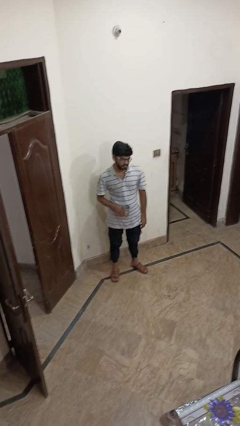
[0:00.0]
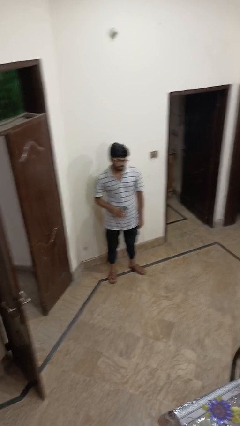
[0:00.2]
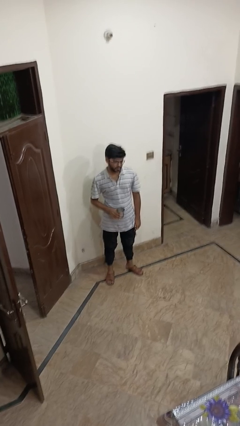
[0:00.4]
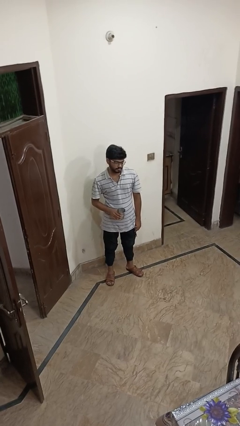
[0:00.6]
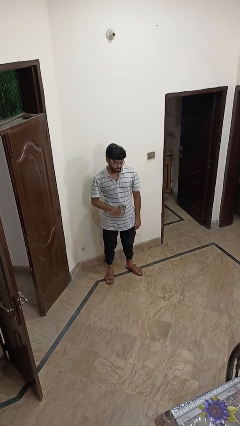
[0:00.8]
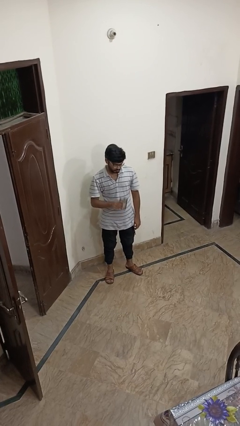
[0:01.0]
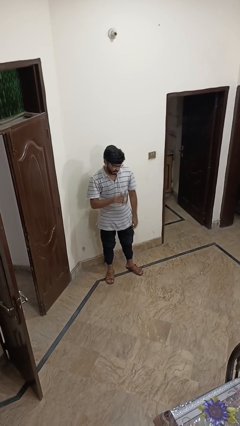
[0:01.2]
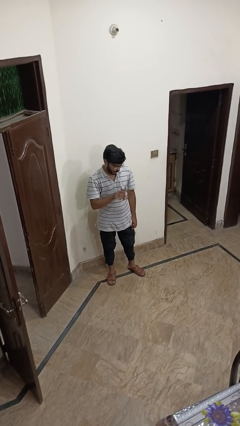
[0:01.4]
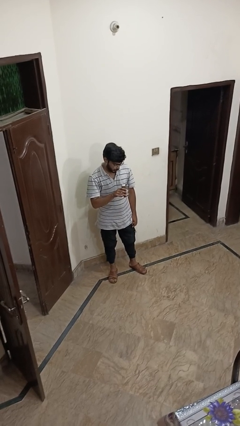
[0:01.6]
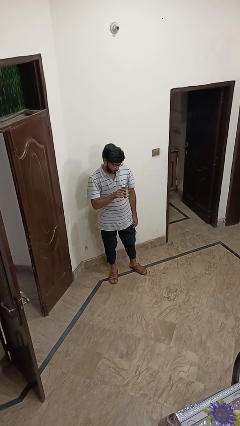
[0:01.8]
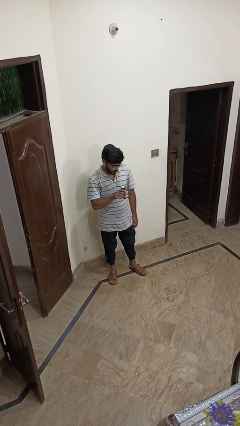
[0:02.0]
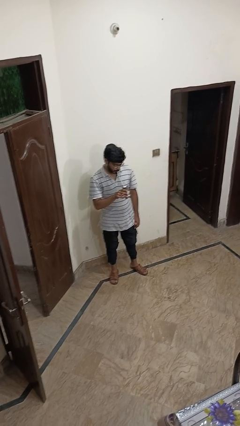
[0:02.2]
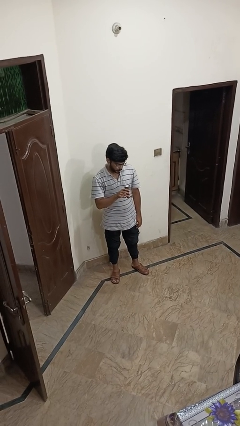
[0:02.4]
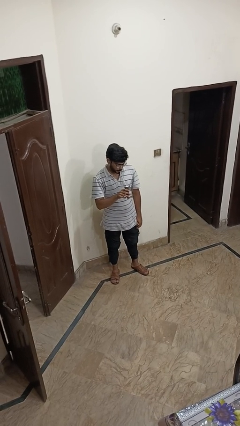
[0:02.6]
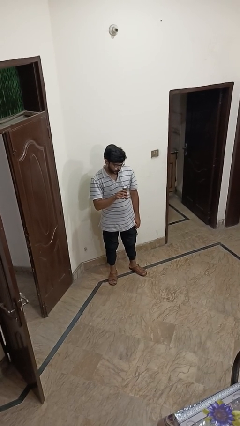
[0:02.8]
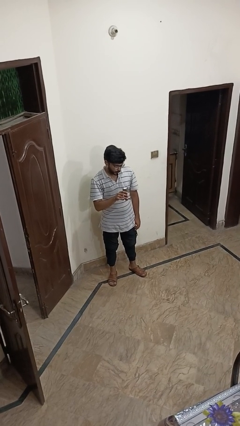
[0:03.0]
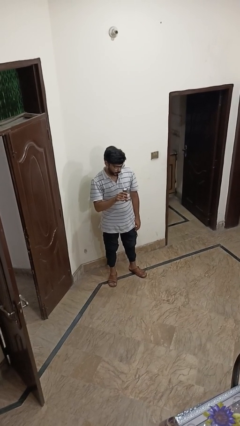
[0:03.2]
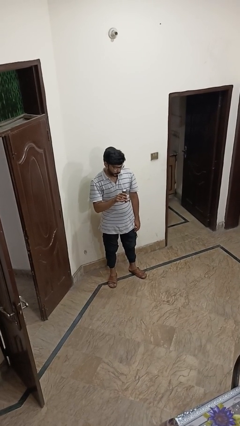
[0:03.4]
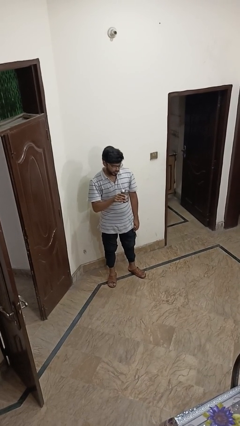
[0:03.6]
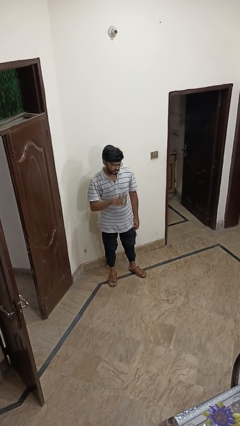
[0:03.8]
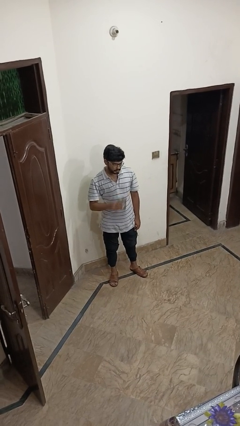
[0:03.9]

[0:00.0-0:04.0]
person drinks from straw

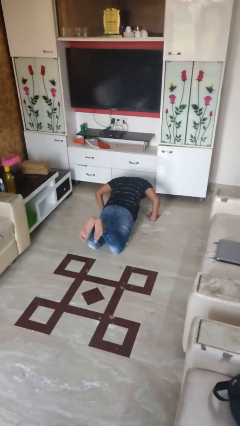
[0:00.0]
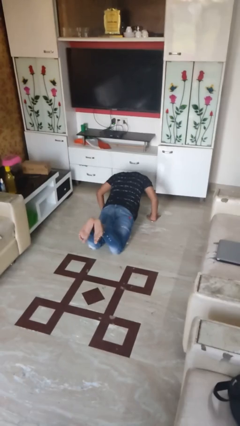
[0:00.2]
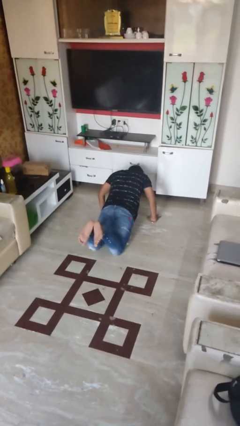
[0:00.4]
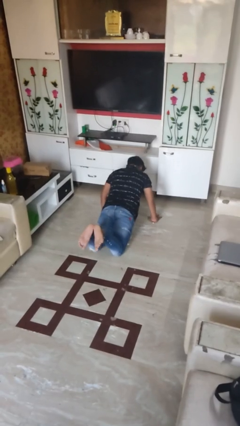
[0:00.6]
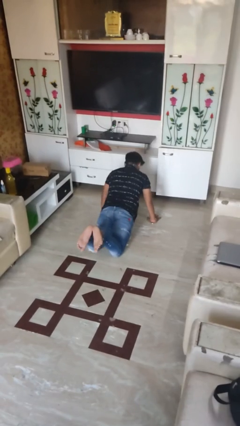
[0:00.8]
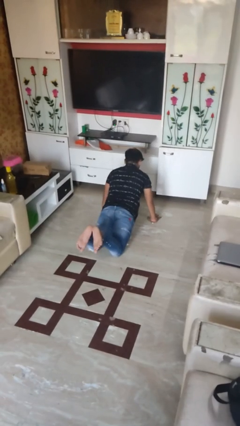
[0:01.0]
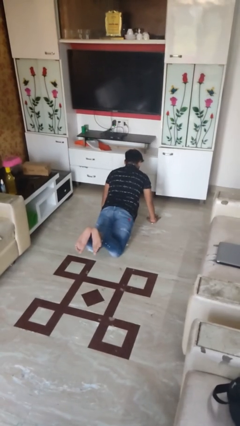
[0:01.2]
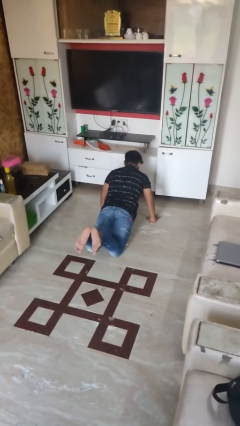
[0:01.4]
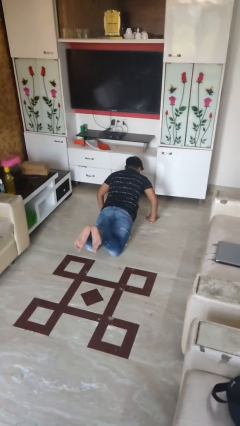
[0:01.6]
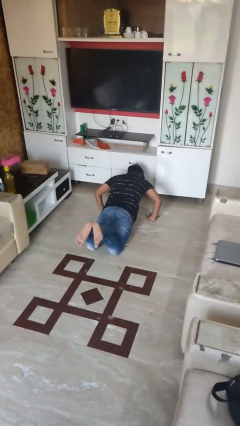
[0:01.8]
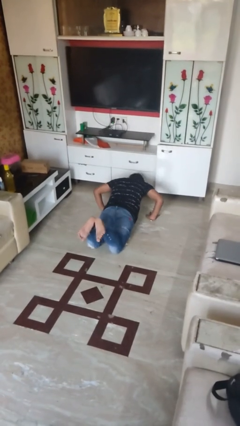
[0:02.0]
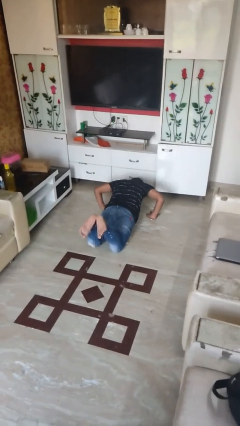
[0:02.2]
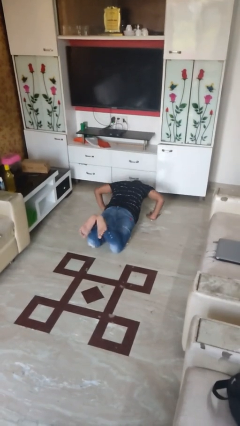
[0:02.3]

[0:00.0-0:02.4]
person exercises with pushup

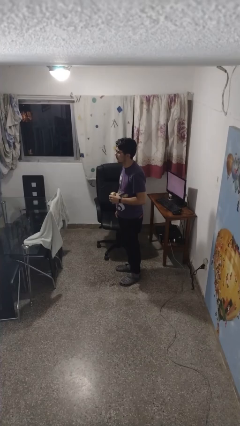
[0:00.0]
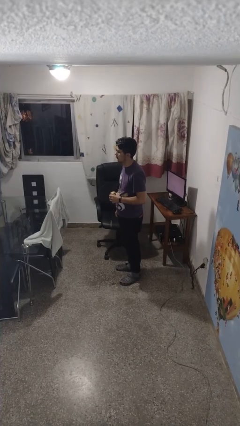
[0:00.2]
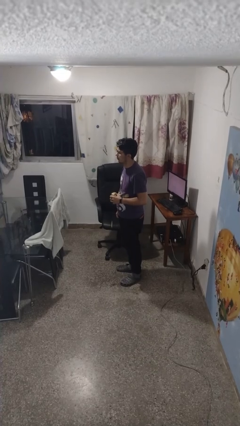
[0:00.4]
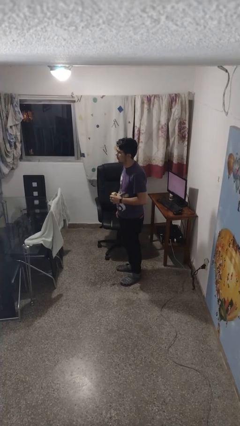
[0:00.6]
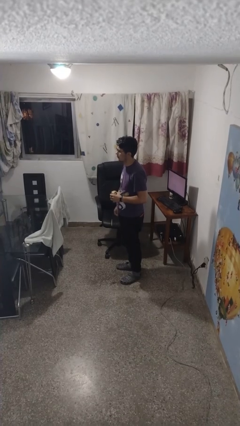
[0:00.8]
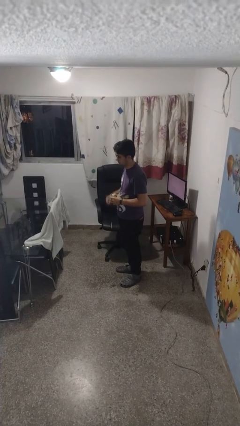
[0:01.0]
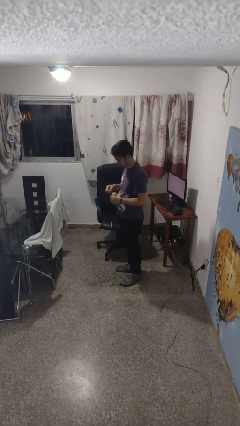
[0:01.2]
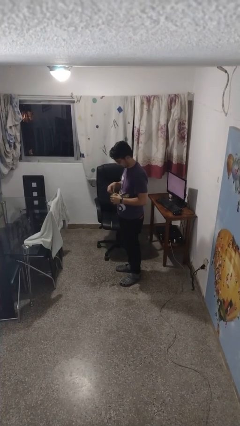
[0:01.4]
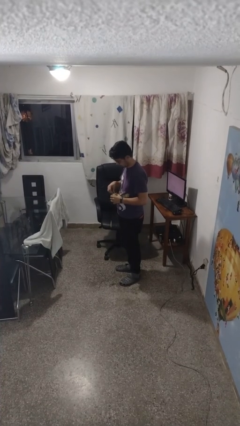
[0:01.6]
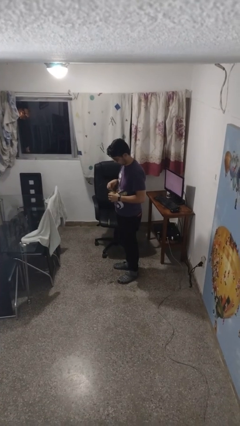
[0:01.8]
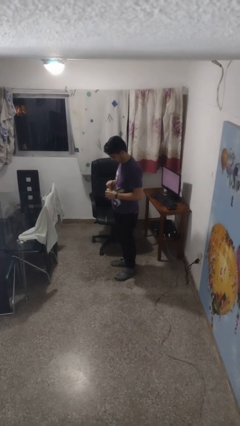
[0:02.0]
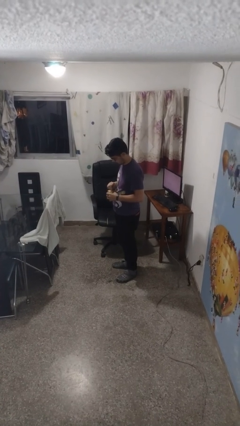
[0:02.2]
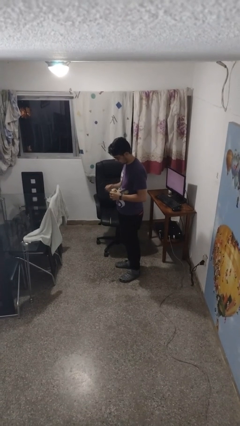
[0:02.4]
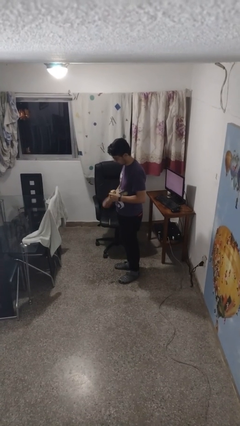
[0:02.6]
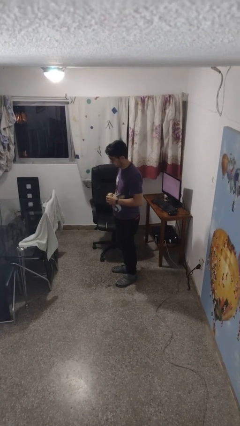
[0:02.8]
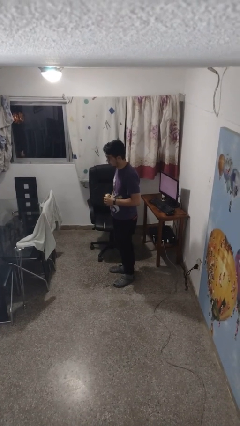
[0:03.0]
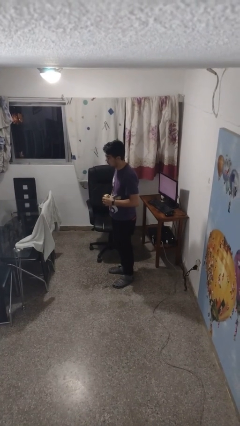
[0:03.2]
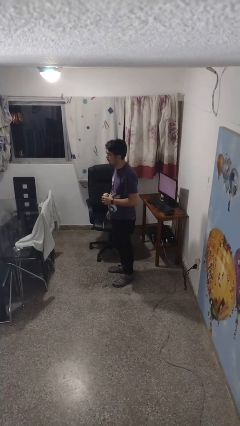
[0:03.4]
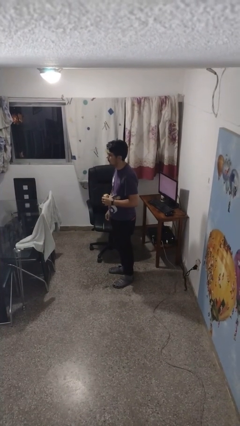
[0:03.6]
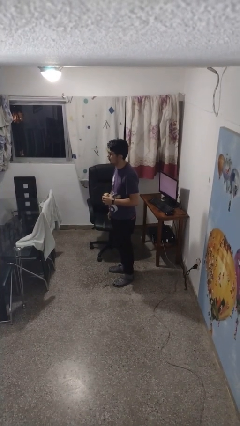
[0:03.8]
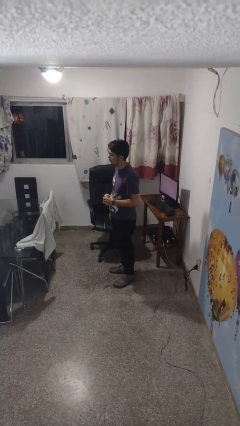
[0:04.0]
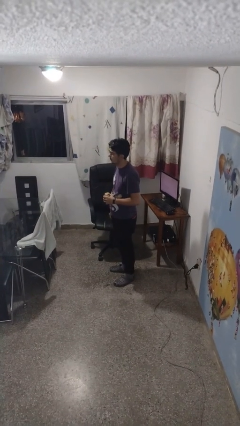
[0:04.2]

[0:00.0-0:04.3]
person opens beverage can

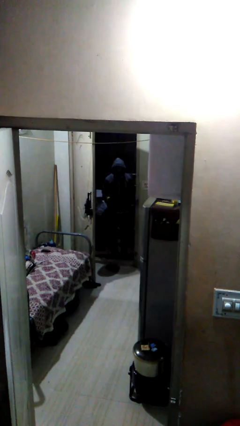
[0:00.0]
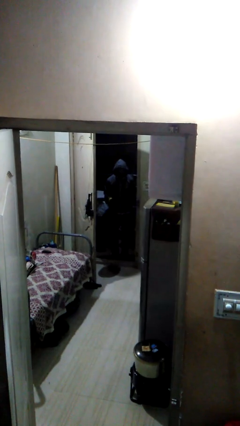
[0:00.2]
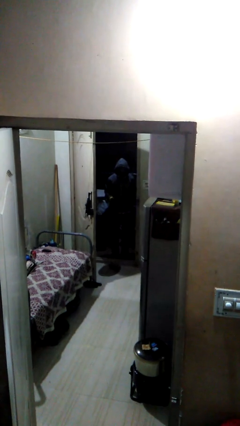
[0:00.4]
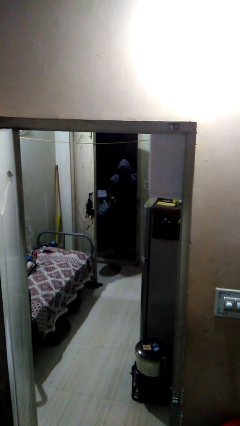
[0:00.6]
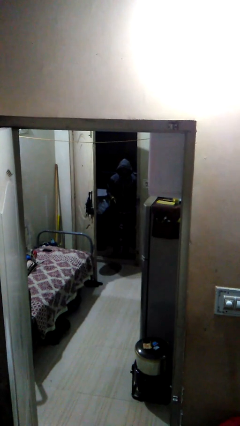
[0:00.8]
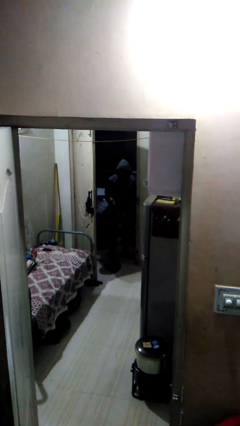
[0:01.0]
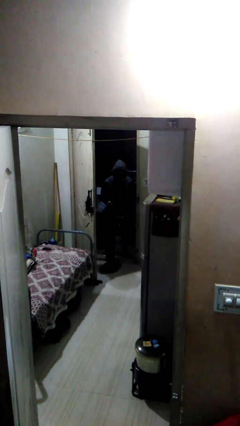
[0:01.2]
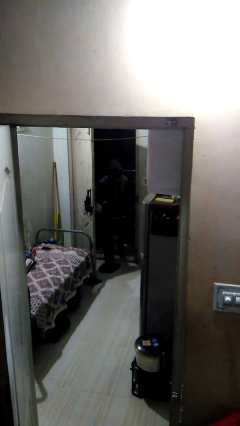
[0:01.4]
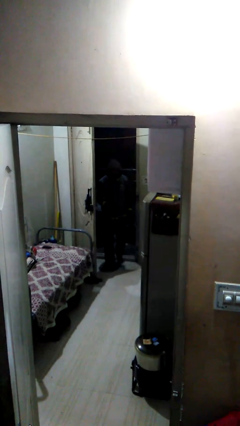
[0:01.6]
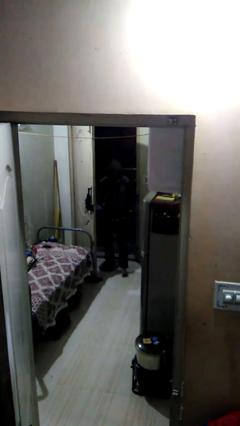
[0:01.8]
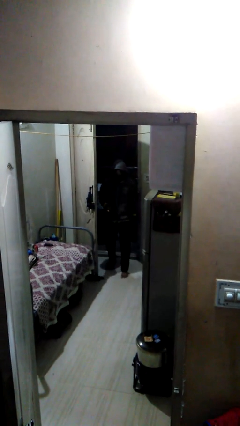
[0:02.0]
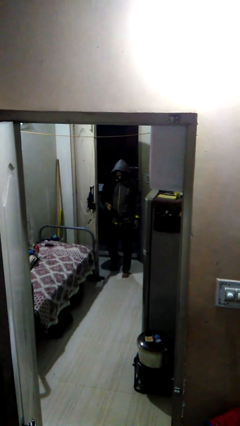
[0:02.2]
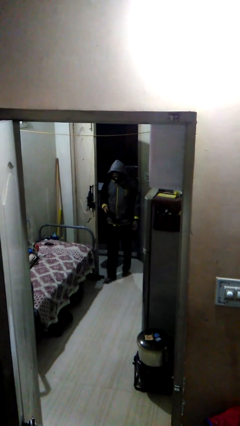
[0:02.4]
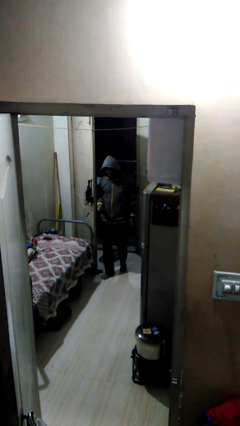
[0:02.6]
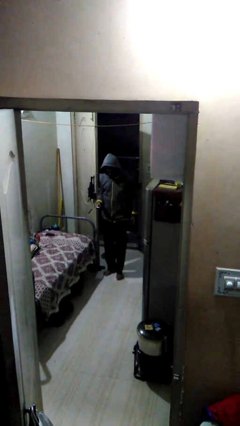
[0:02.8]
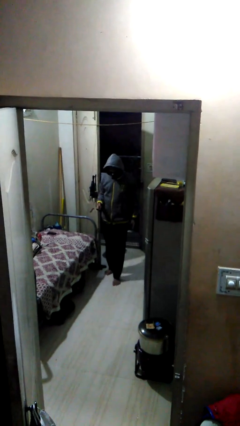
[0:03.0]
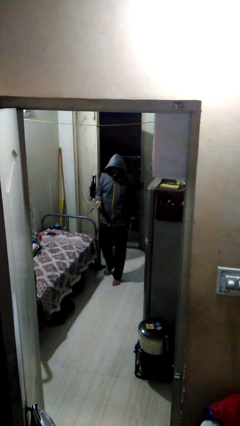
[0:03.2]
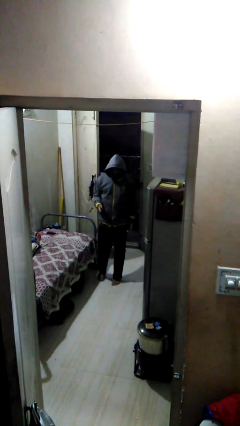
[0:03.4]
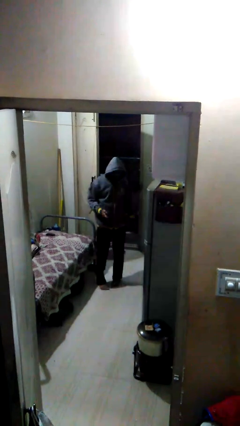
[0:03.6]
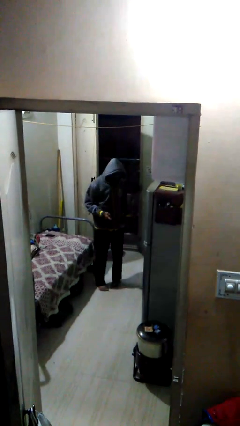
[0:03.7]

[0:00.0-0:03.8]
person enters scene through structure

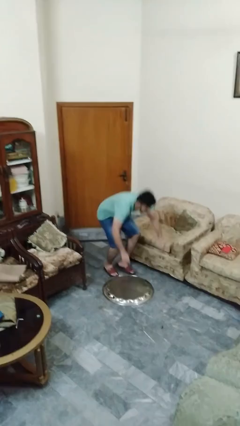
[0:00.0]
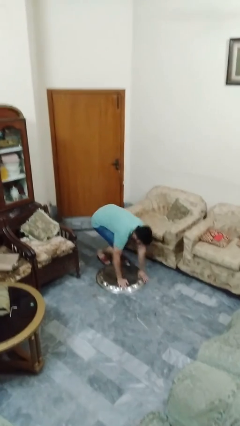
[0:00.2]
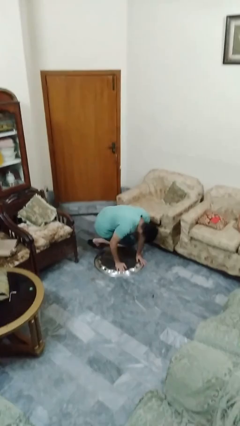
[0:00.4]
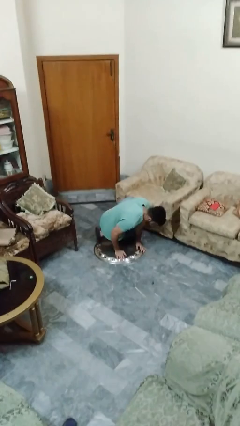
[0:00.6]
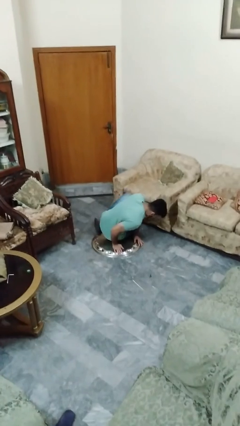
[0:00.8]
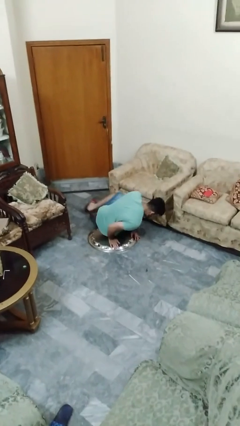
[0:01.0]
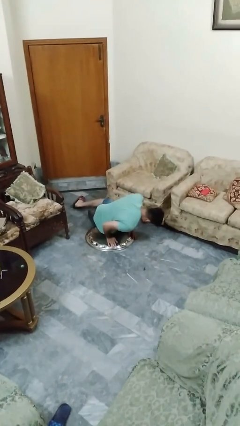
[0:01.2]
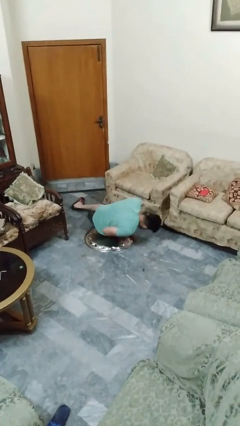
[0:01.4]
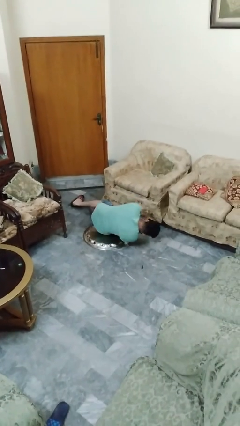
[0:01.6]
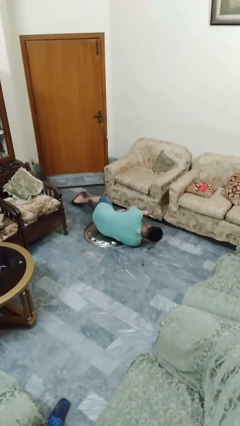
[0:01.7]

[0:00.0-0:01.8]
person trips on object on floor

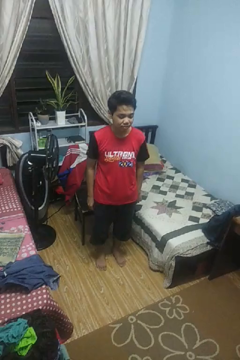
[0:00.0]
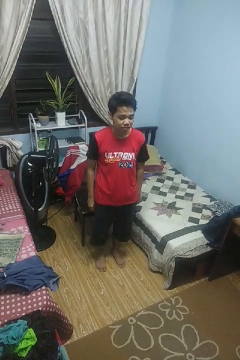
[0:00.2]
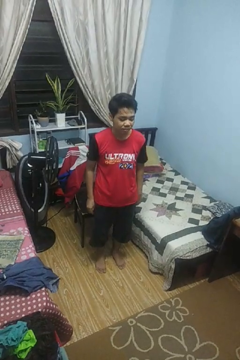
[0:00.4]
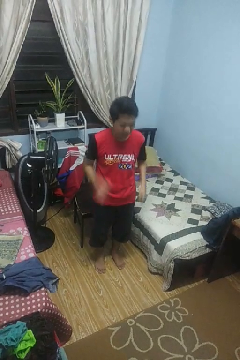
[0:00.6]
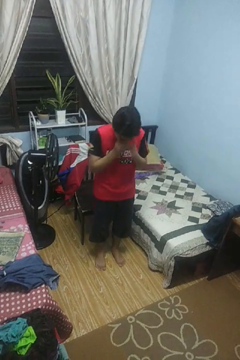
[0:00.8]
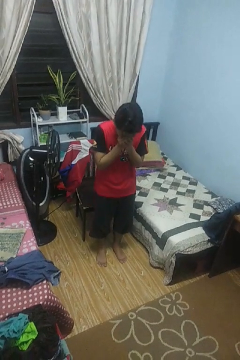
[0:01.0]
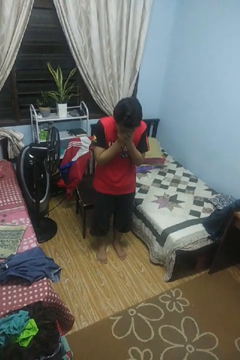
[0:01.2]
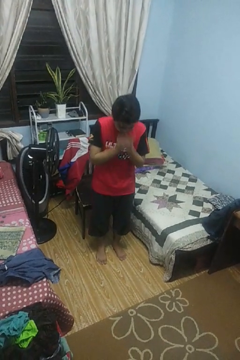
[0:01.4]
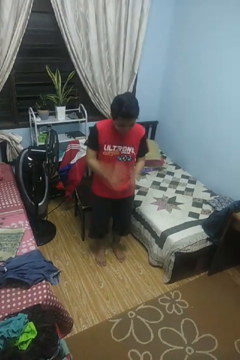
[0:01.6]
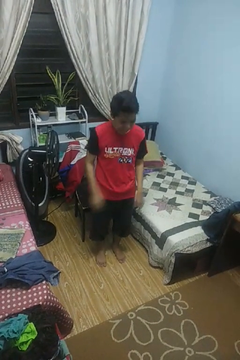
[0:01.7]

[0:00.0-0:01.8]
person sneezes into hand
